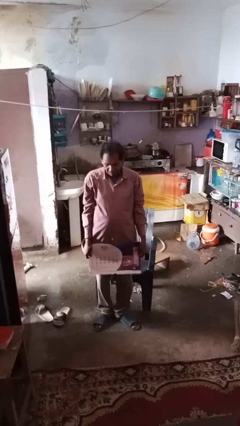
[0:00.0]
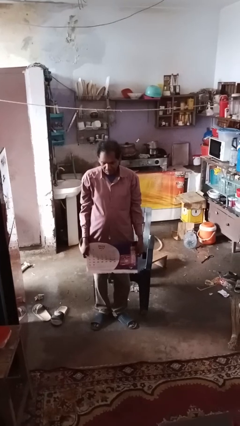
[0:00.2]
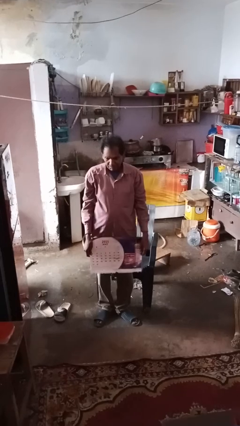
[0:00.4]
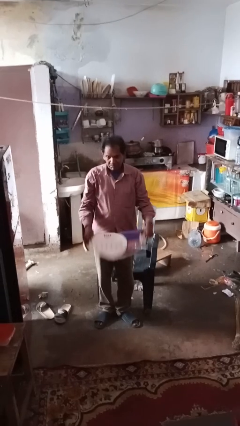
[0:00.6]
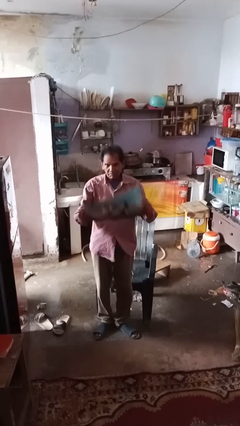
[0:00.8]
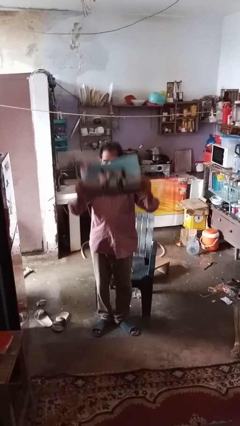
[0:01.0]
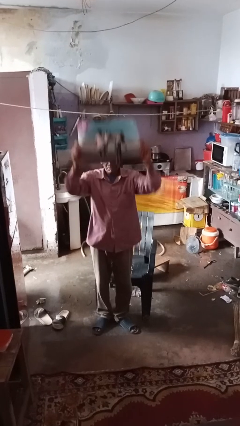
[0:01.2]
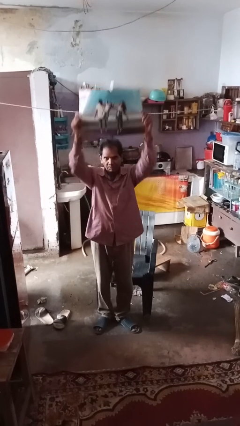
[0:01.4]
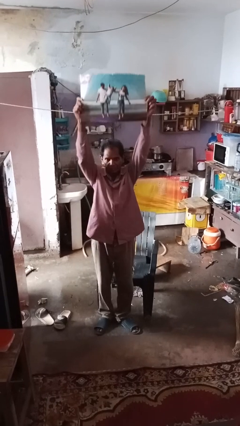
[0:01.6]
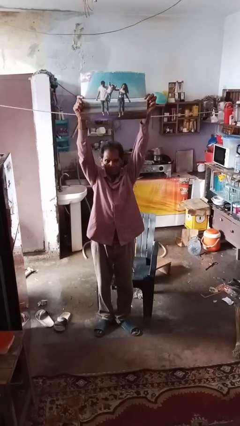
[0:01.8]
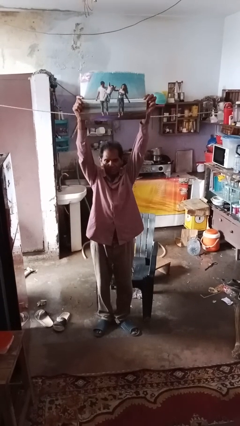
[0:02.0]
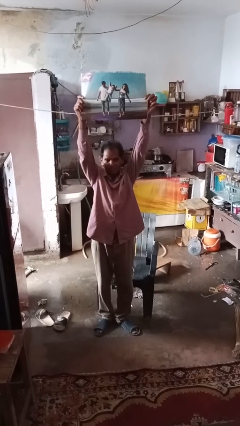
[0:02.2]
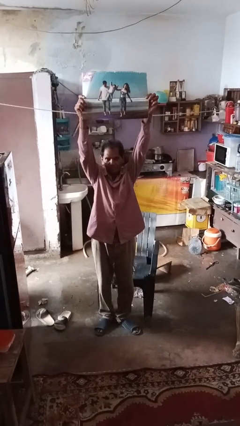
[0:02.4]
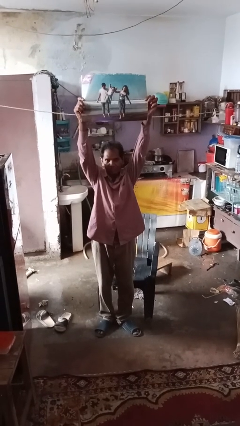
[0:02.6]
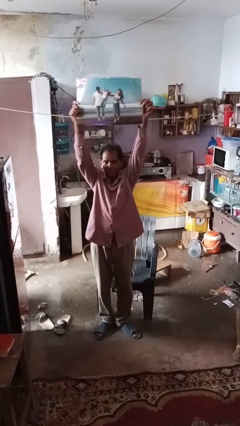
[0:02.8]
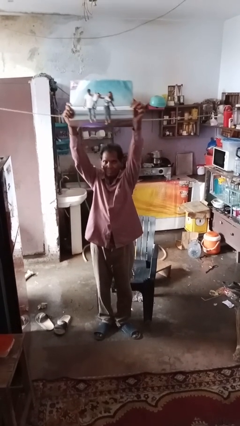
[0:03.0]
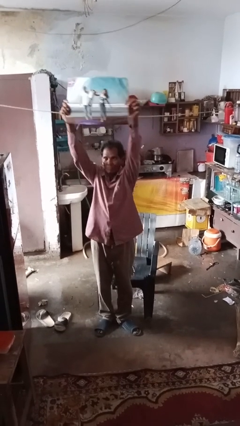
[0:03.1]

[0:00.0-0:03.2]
person holds object above head

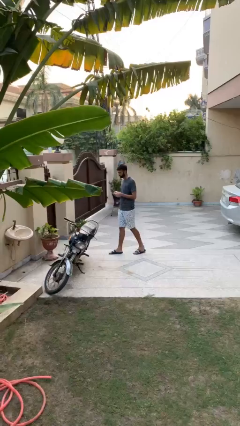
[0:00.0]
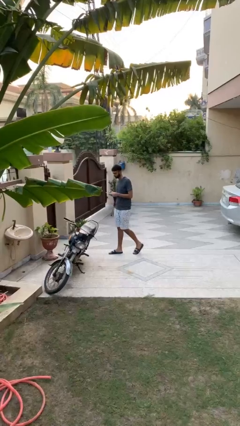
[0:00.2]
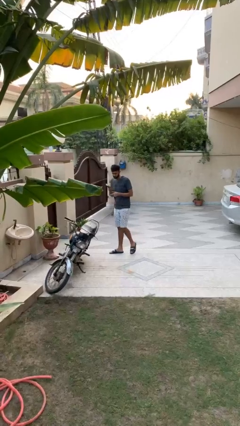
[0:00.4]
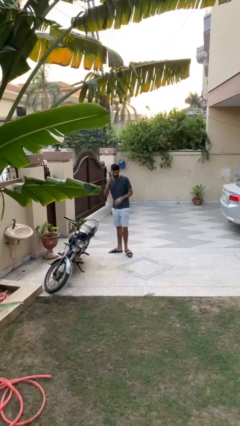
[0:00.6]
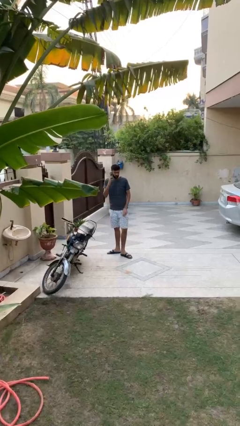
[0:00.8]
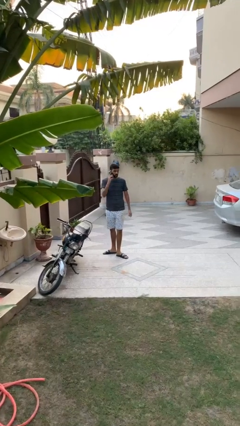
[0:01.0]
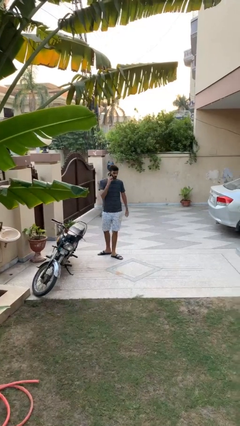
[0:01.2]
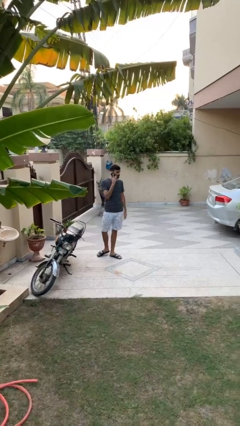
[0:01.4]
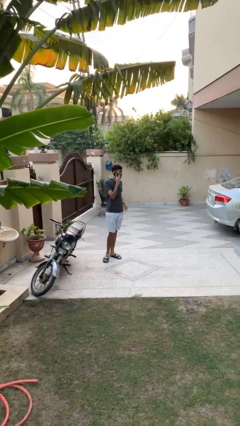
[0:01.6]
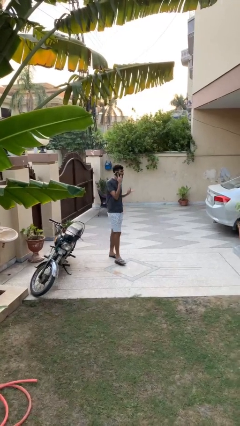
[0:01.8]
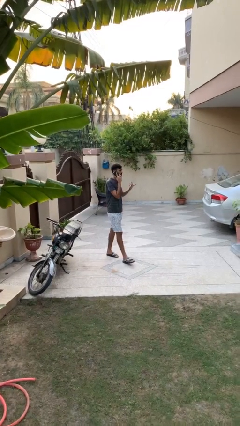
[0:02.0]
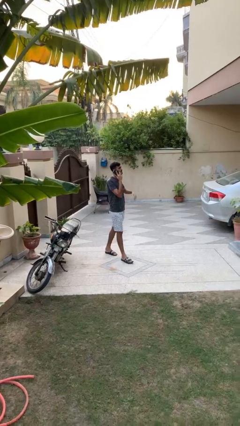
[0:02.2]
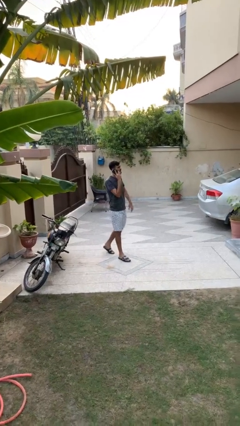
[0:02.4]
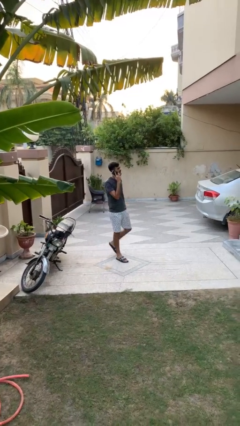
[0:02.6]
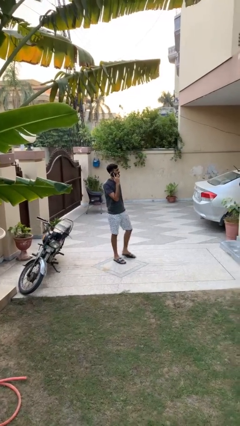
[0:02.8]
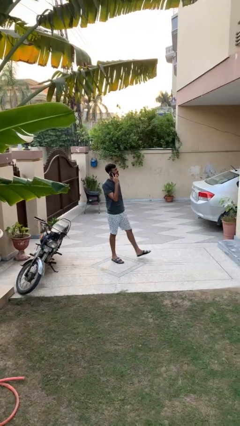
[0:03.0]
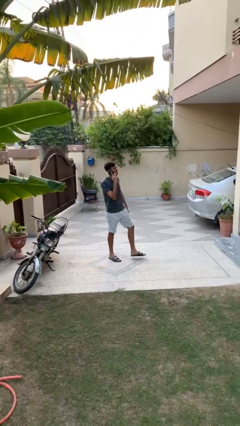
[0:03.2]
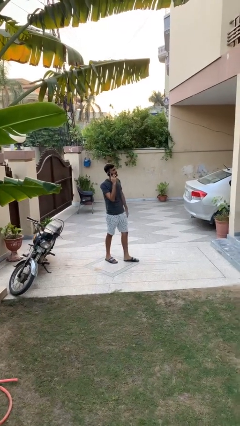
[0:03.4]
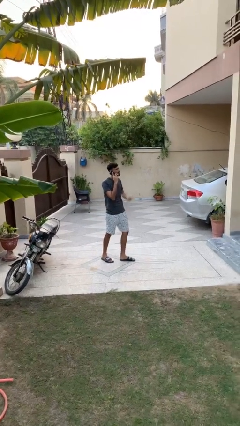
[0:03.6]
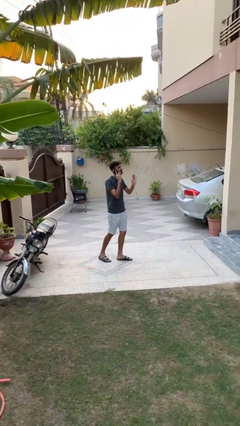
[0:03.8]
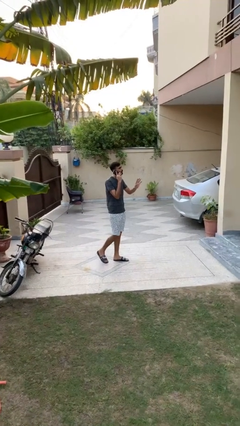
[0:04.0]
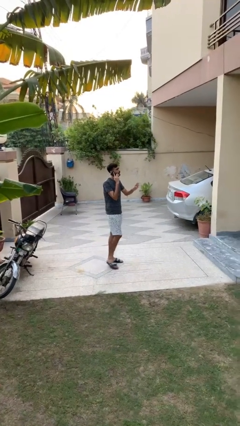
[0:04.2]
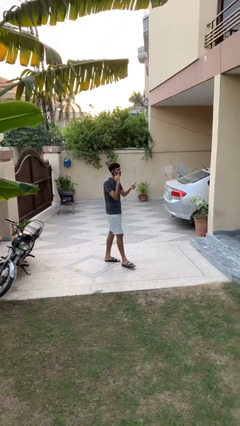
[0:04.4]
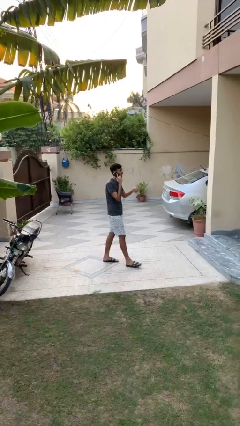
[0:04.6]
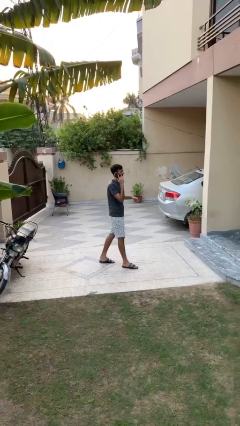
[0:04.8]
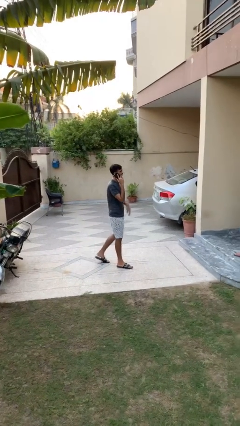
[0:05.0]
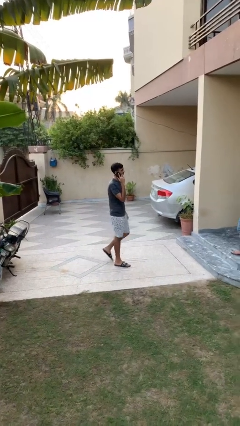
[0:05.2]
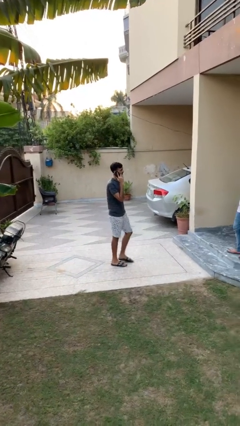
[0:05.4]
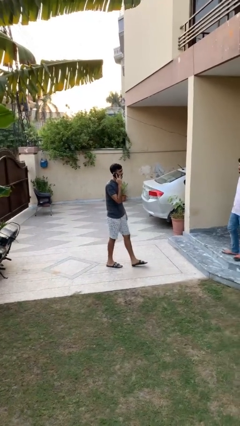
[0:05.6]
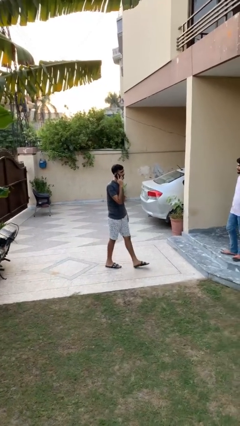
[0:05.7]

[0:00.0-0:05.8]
person talks on phone

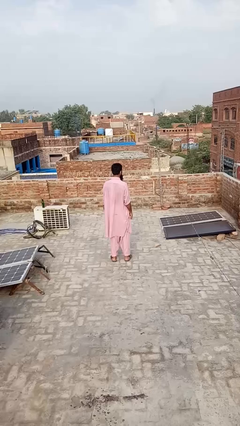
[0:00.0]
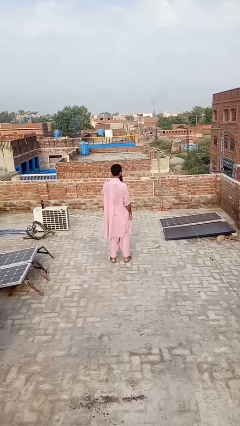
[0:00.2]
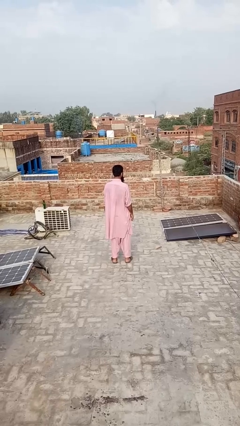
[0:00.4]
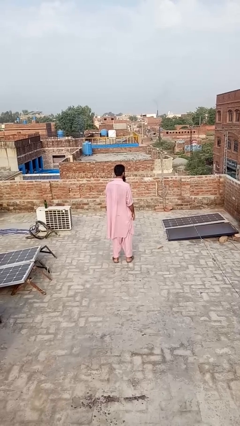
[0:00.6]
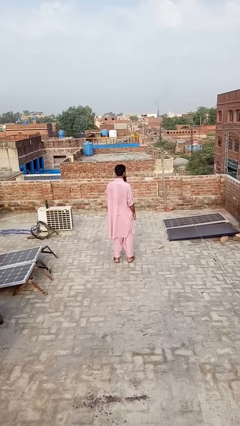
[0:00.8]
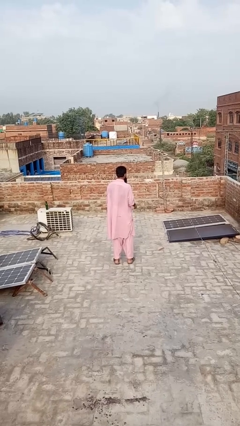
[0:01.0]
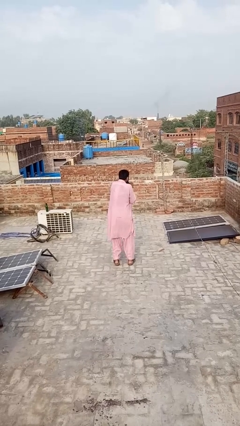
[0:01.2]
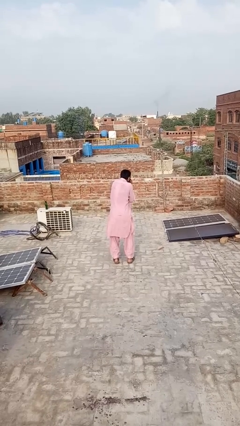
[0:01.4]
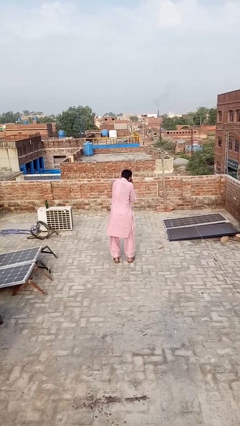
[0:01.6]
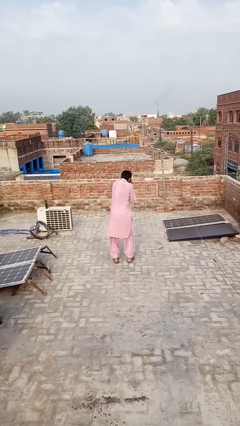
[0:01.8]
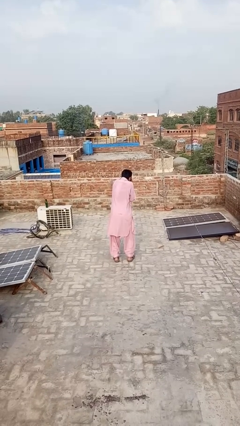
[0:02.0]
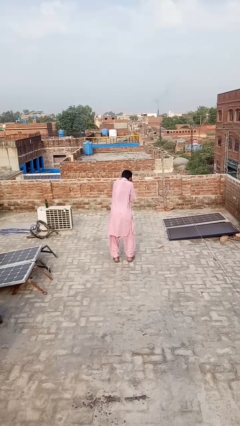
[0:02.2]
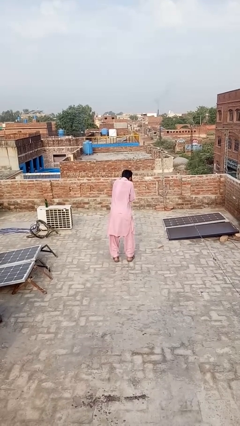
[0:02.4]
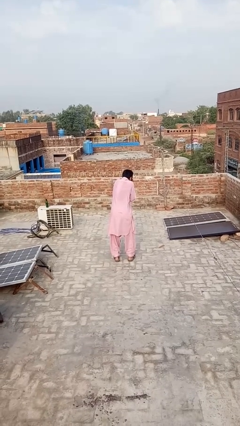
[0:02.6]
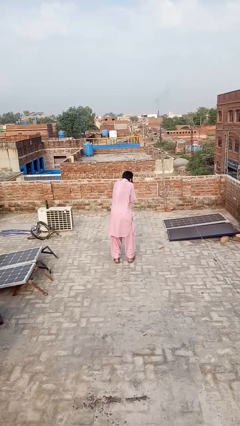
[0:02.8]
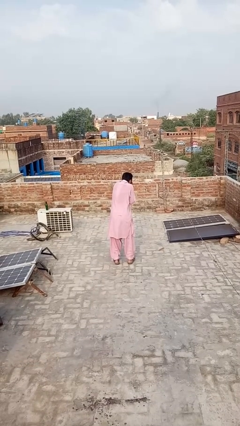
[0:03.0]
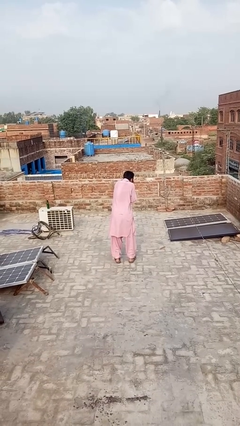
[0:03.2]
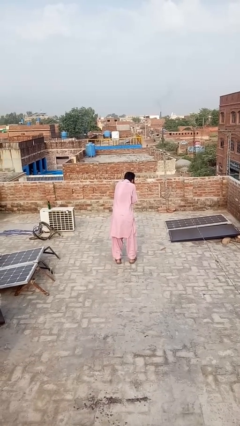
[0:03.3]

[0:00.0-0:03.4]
person blows into hands

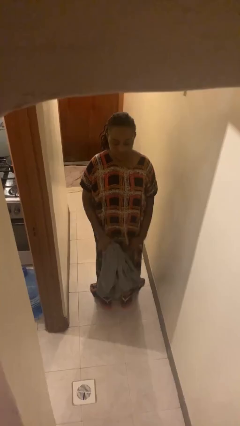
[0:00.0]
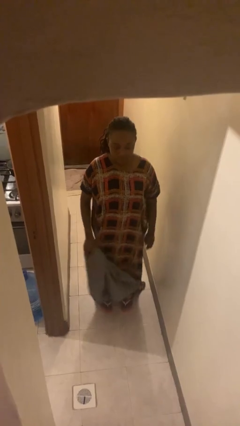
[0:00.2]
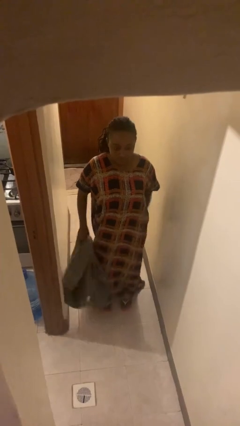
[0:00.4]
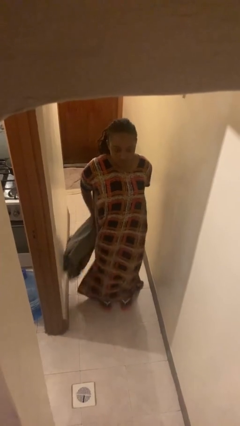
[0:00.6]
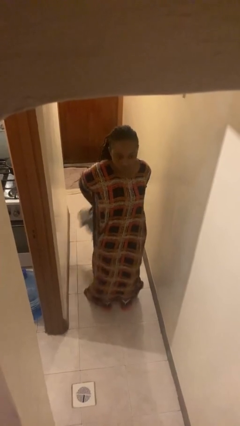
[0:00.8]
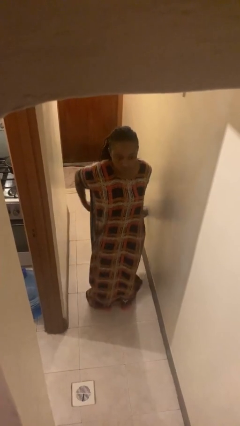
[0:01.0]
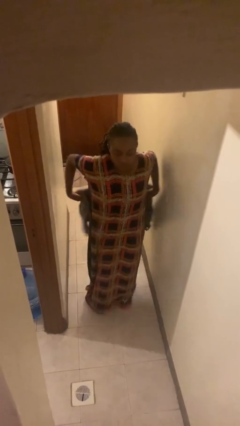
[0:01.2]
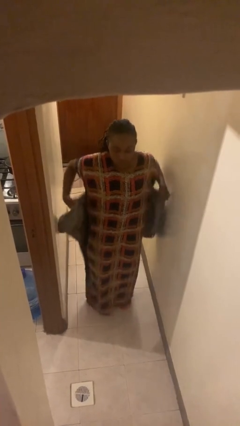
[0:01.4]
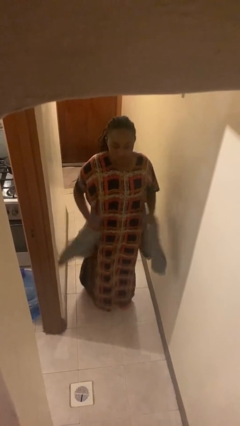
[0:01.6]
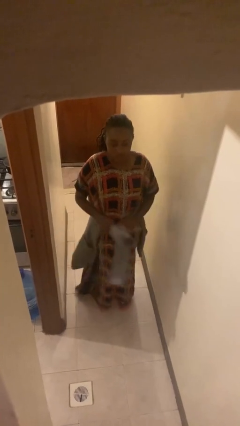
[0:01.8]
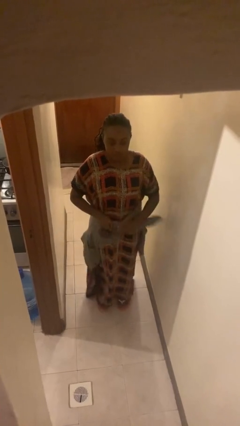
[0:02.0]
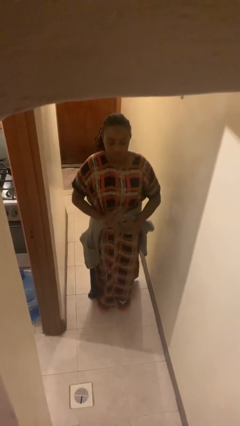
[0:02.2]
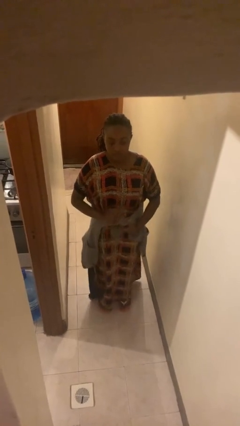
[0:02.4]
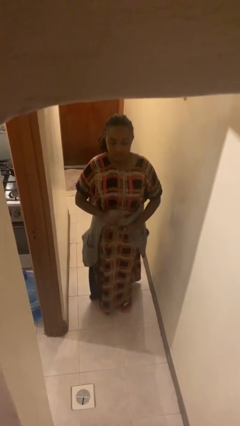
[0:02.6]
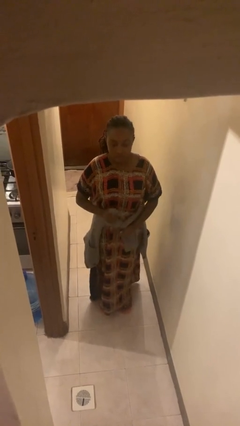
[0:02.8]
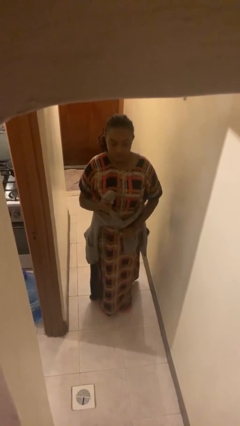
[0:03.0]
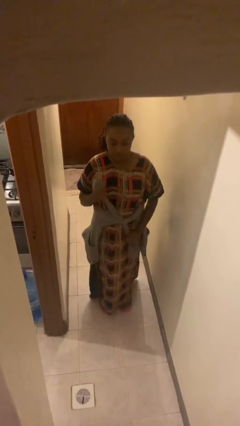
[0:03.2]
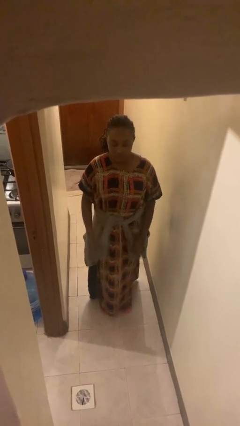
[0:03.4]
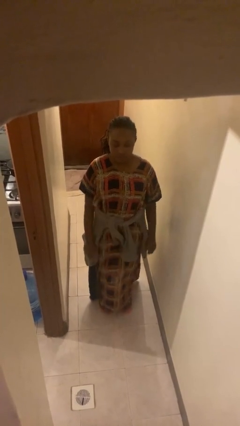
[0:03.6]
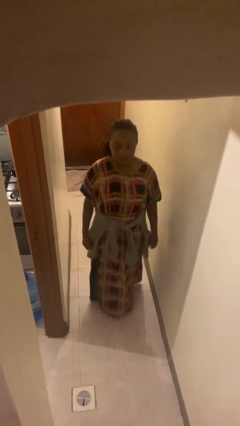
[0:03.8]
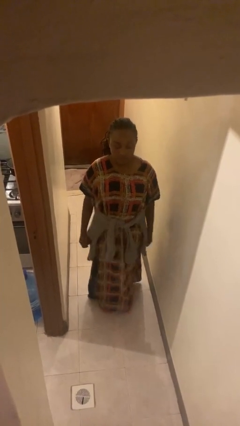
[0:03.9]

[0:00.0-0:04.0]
person ties jacket around waist

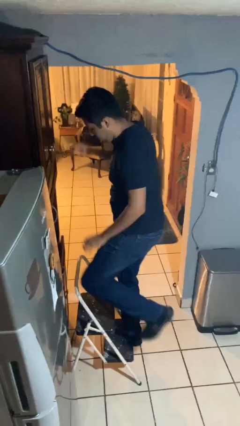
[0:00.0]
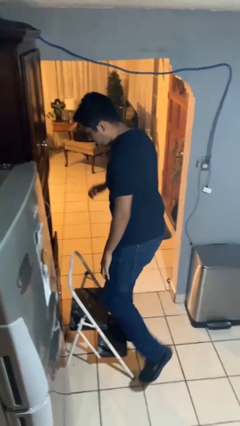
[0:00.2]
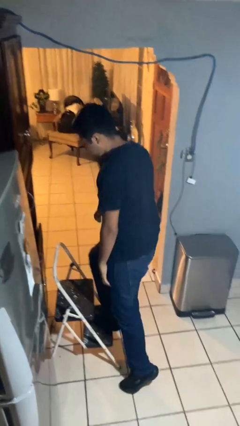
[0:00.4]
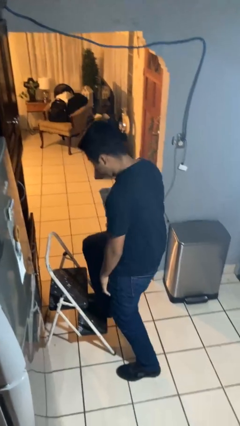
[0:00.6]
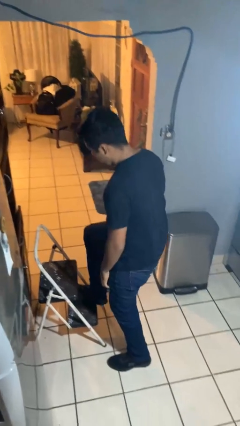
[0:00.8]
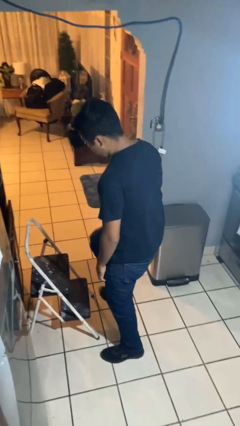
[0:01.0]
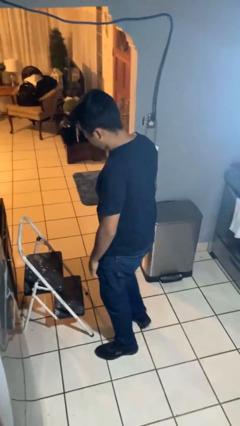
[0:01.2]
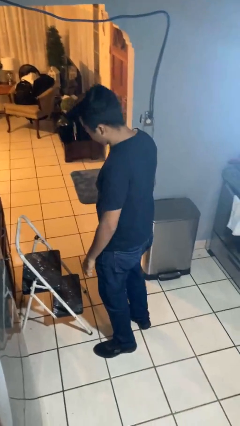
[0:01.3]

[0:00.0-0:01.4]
person climbs down ladder
